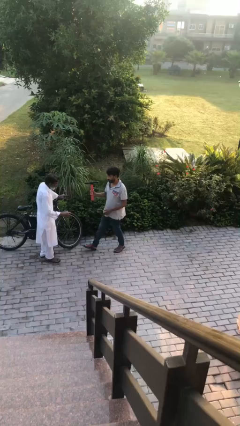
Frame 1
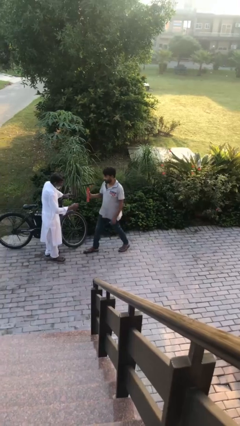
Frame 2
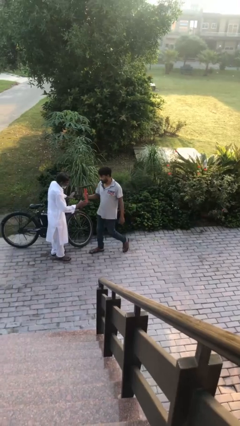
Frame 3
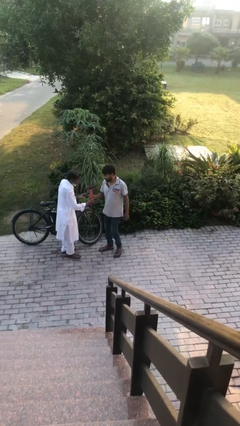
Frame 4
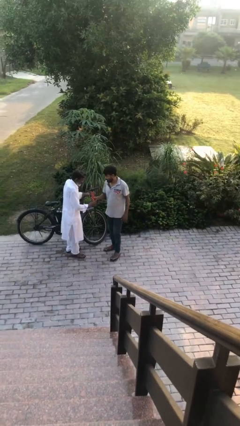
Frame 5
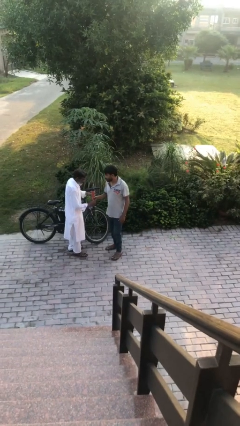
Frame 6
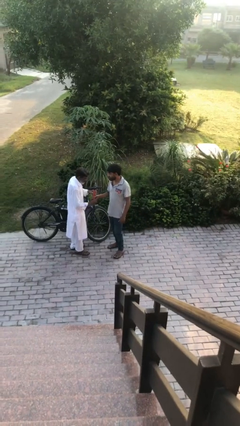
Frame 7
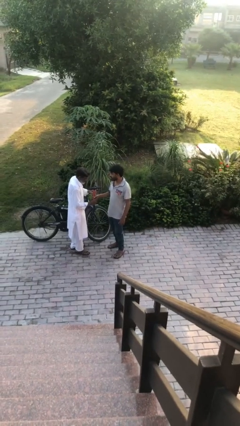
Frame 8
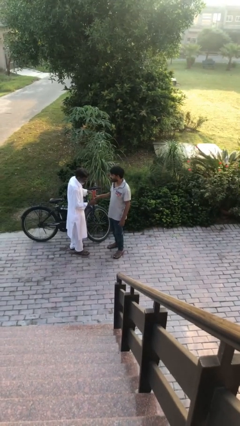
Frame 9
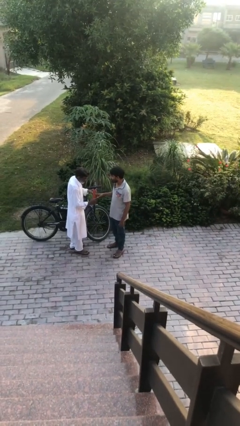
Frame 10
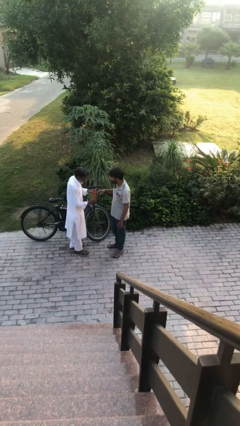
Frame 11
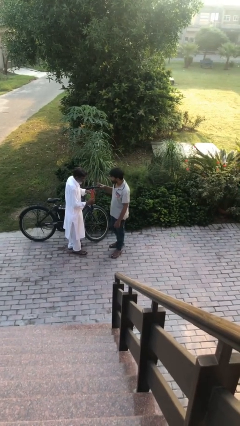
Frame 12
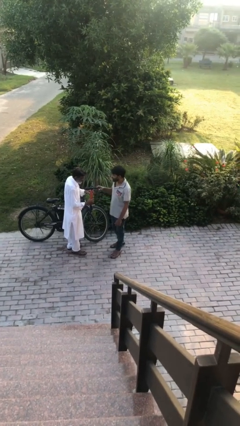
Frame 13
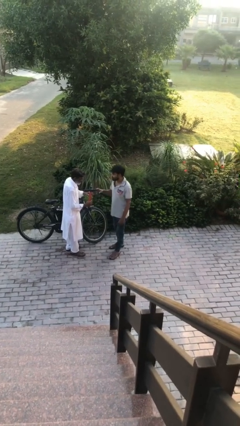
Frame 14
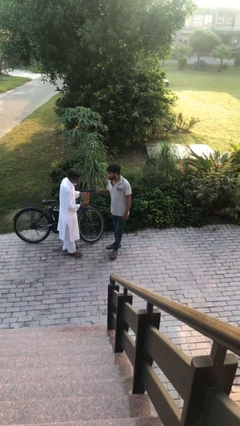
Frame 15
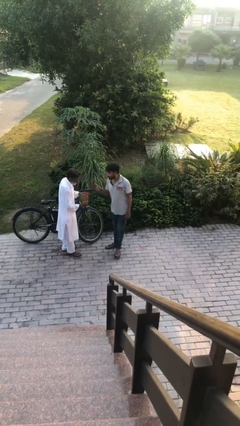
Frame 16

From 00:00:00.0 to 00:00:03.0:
person transfers object to person

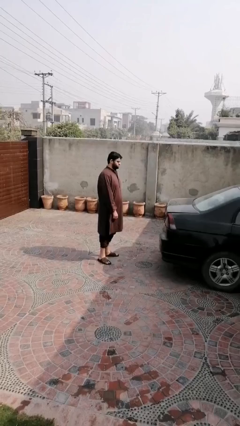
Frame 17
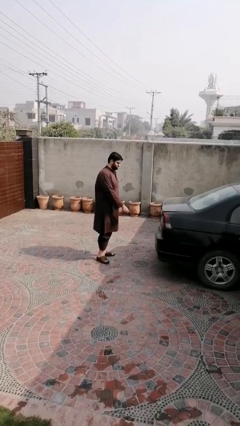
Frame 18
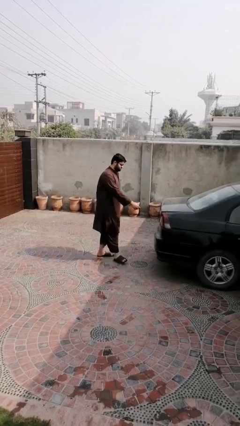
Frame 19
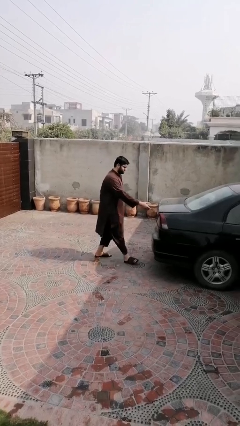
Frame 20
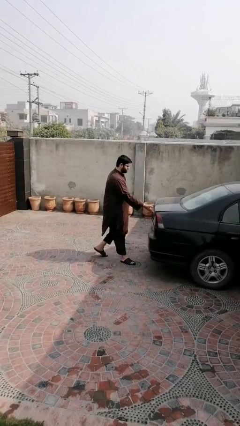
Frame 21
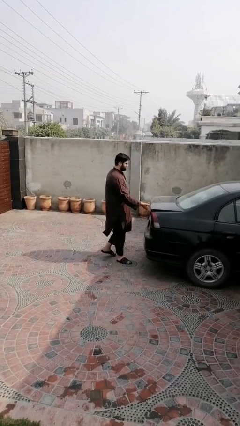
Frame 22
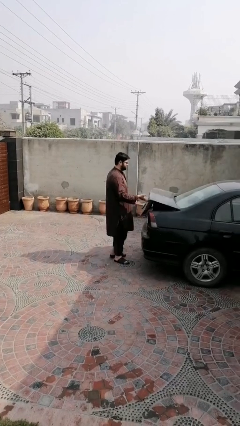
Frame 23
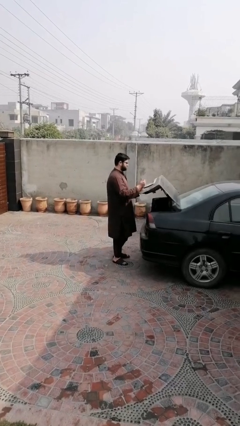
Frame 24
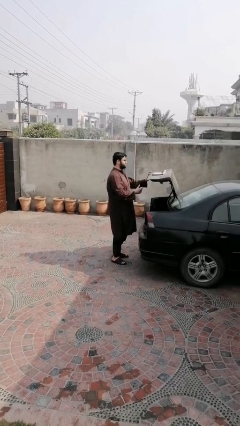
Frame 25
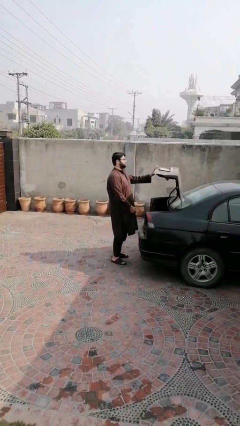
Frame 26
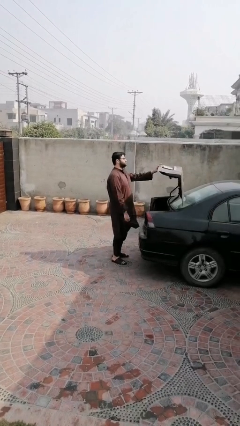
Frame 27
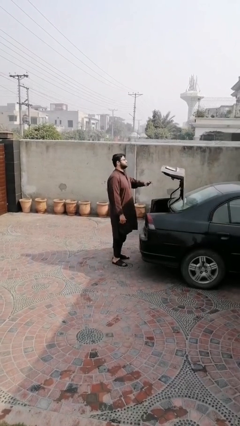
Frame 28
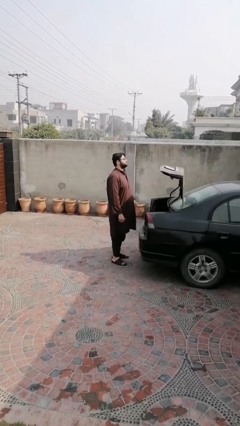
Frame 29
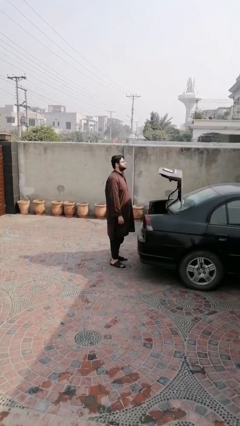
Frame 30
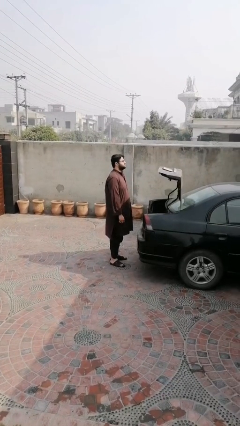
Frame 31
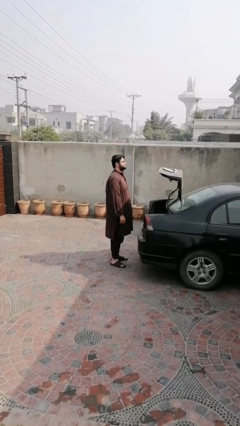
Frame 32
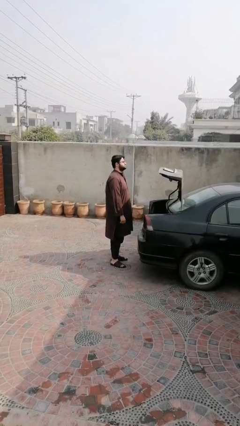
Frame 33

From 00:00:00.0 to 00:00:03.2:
person opens car trunk

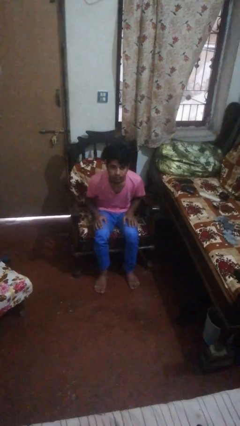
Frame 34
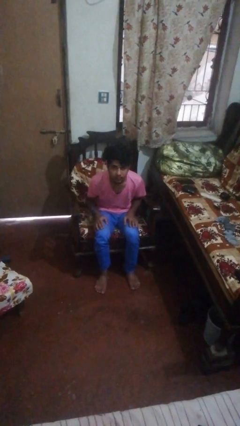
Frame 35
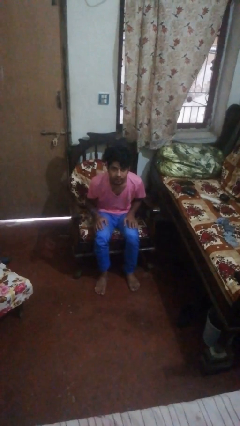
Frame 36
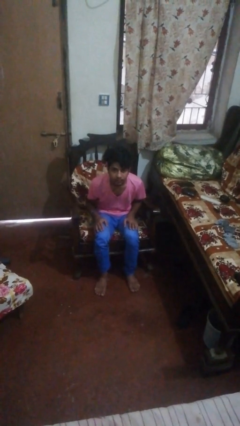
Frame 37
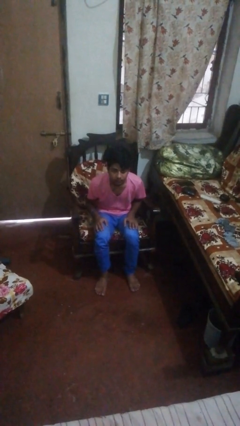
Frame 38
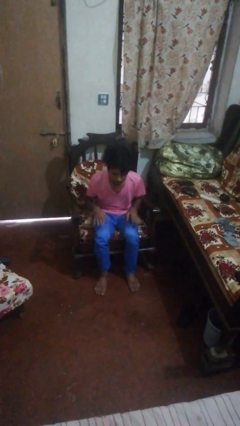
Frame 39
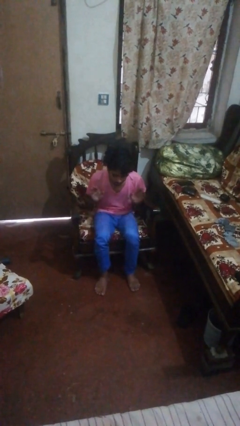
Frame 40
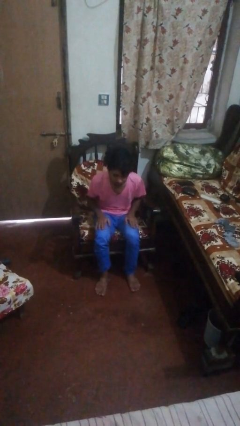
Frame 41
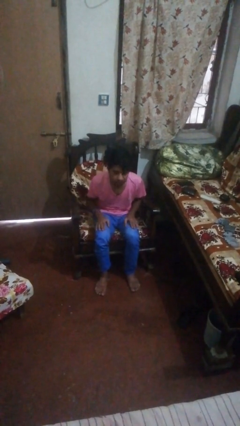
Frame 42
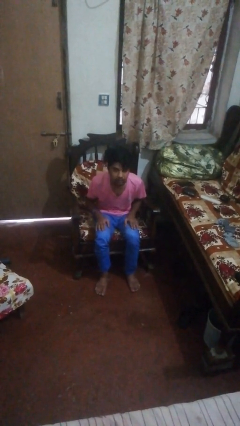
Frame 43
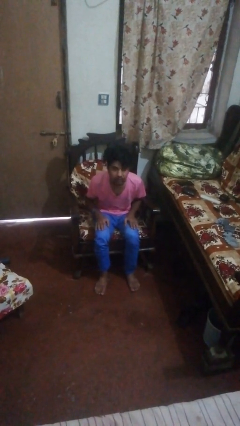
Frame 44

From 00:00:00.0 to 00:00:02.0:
person slaps hands on thighs

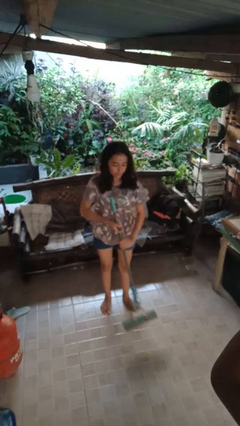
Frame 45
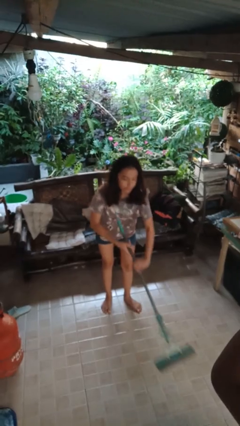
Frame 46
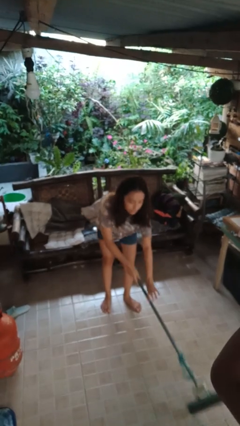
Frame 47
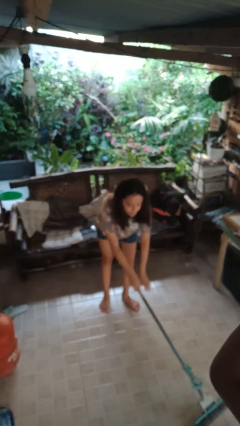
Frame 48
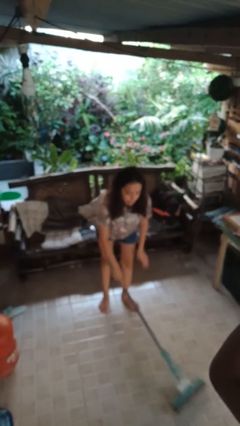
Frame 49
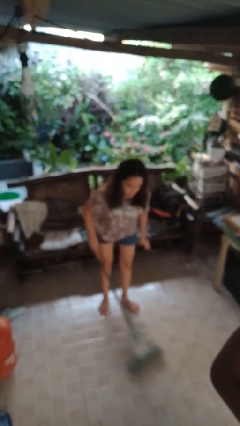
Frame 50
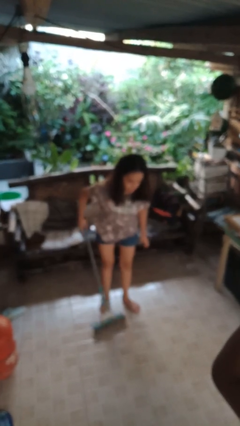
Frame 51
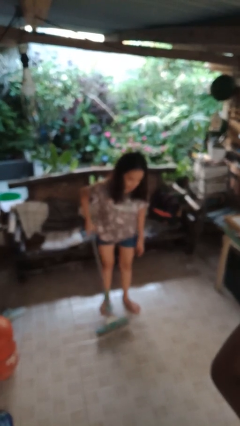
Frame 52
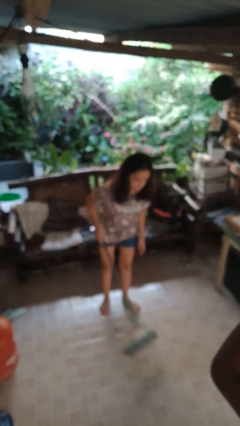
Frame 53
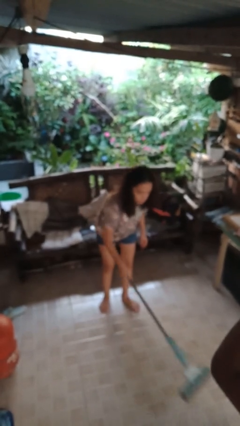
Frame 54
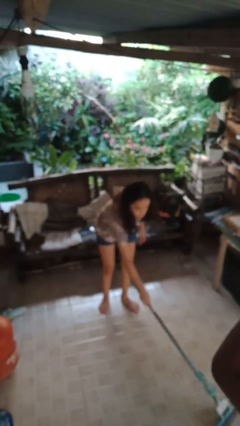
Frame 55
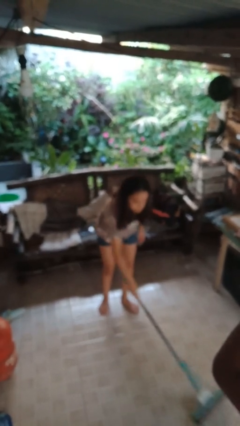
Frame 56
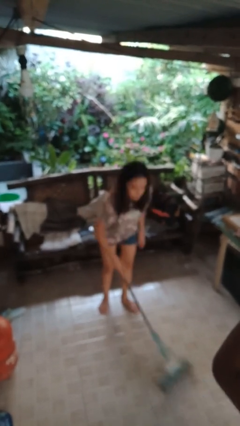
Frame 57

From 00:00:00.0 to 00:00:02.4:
person mops

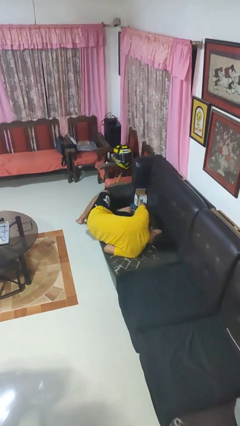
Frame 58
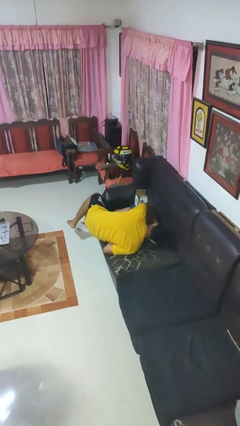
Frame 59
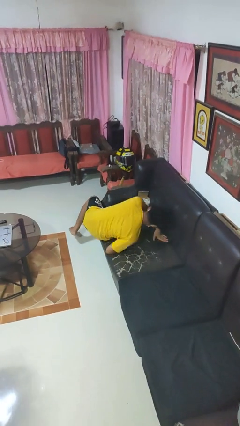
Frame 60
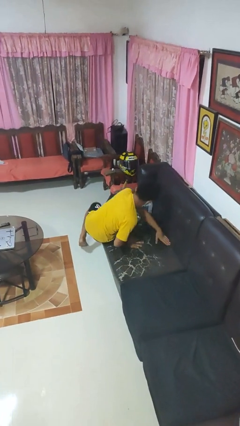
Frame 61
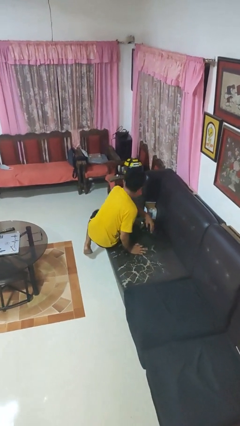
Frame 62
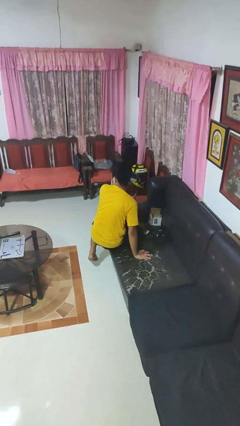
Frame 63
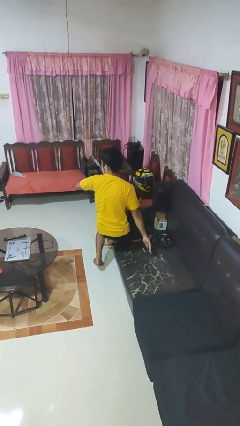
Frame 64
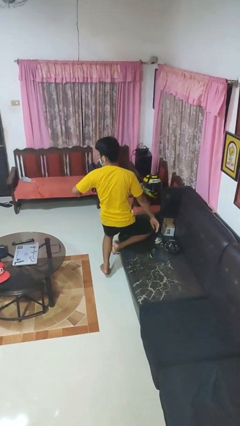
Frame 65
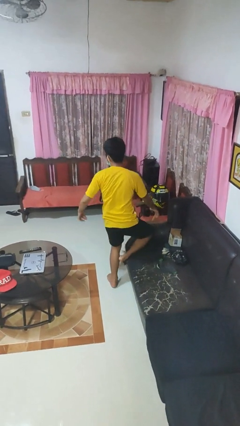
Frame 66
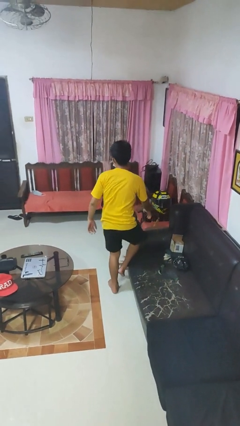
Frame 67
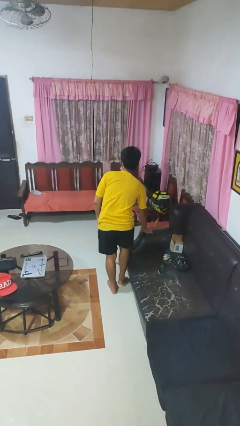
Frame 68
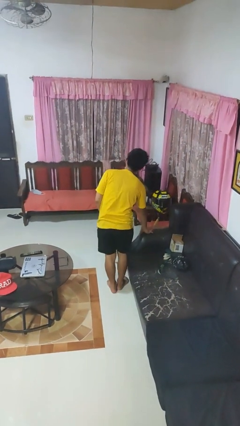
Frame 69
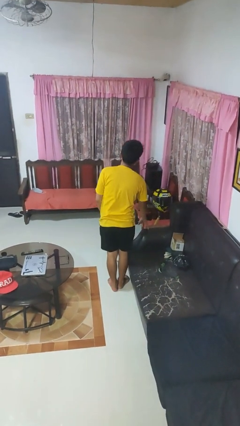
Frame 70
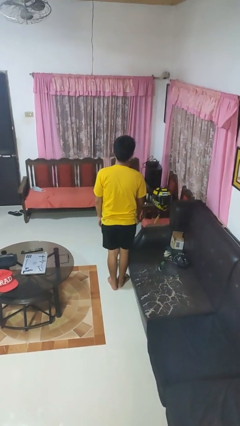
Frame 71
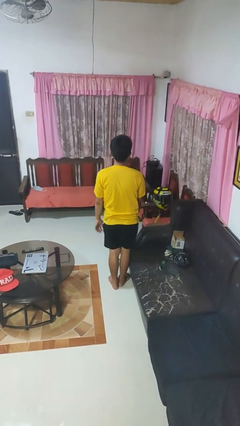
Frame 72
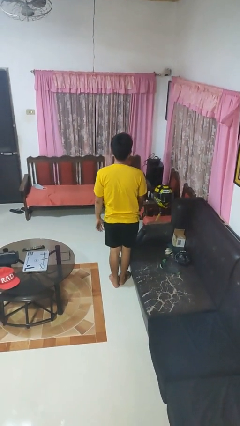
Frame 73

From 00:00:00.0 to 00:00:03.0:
person stands up

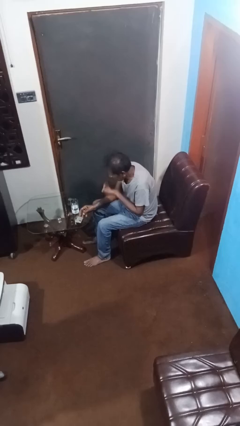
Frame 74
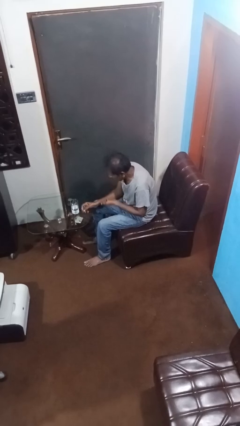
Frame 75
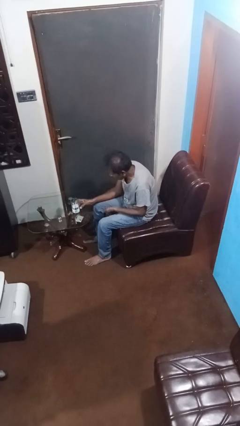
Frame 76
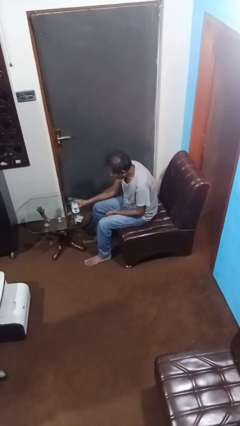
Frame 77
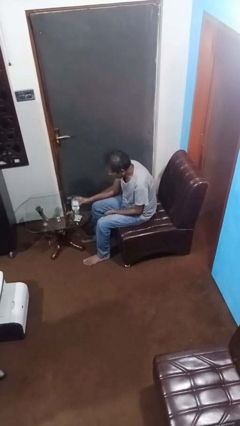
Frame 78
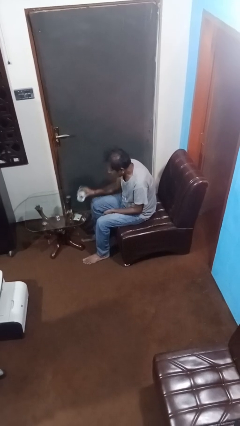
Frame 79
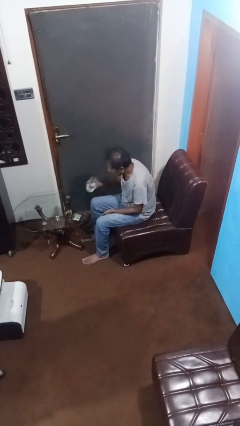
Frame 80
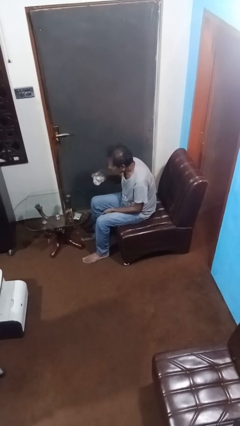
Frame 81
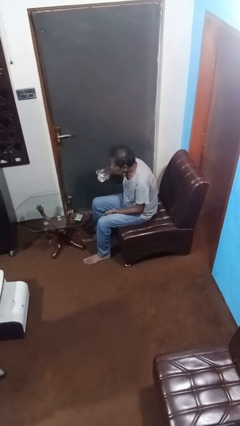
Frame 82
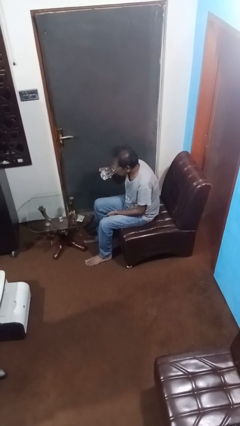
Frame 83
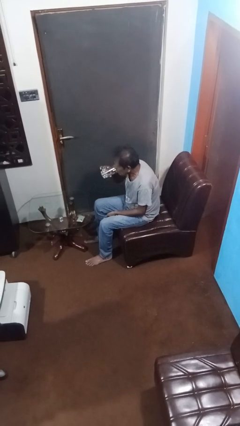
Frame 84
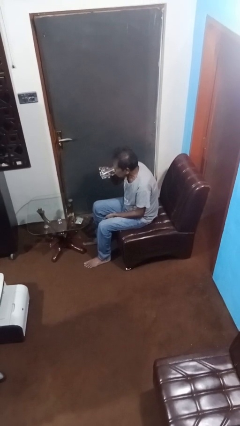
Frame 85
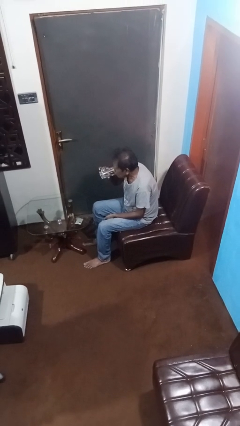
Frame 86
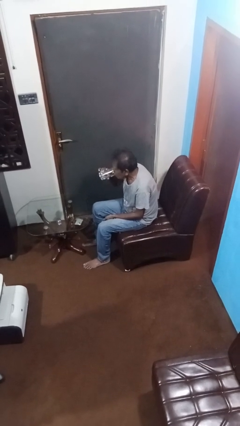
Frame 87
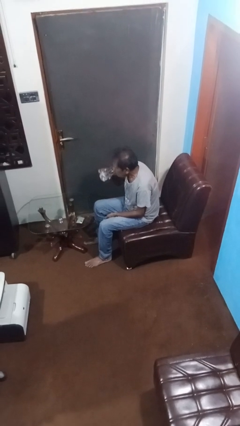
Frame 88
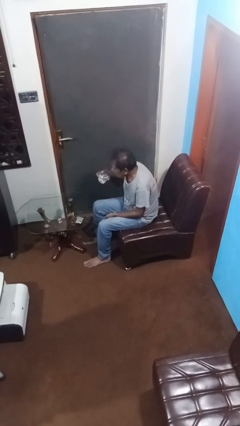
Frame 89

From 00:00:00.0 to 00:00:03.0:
person drinks from cup

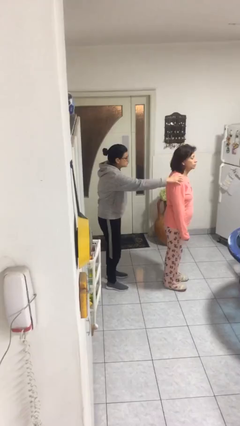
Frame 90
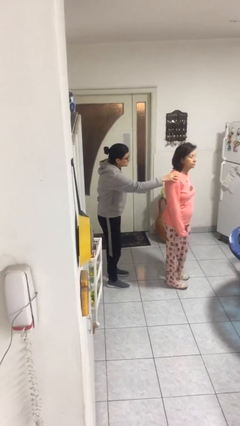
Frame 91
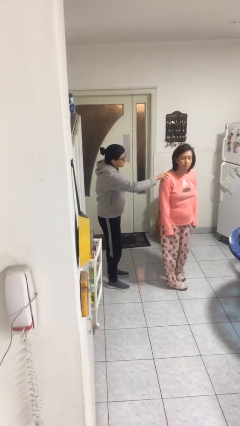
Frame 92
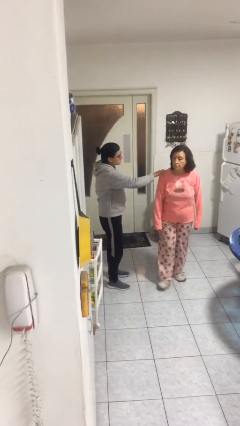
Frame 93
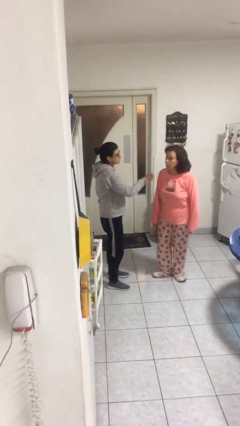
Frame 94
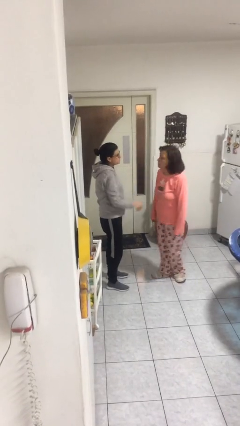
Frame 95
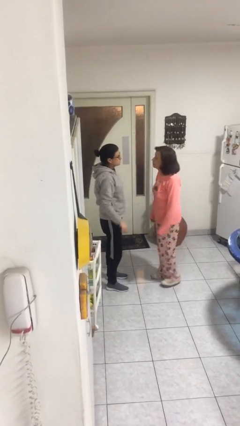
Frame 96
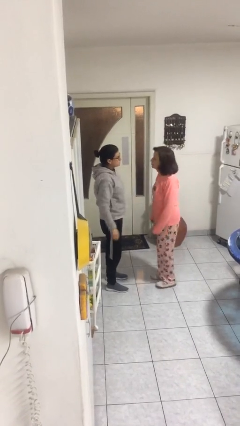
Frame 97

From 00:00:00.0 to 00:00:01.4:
person spins person around
